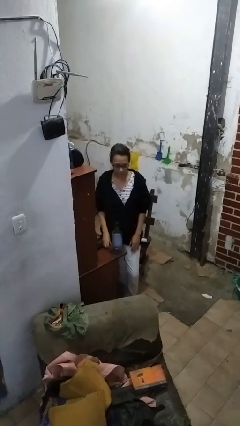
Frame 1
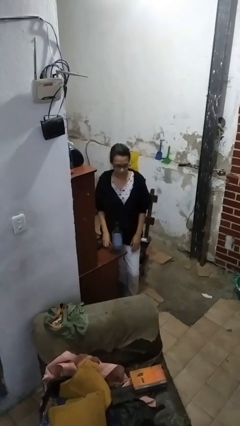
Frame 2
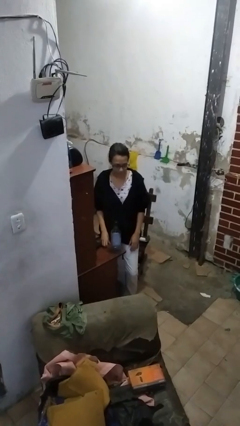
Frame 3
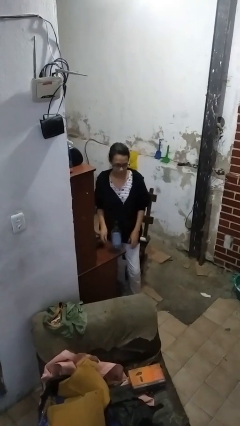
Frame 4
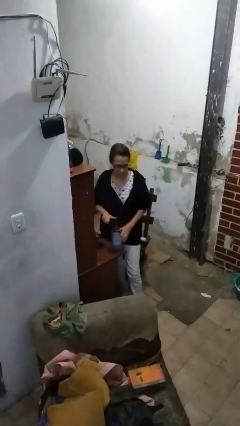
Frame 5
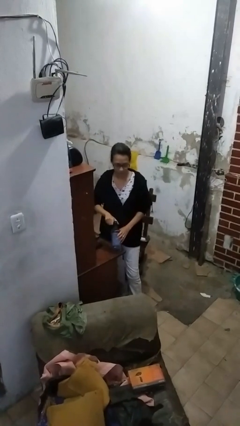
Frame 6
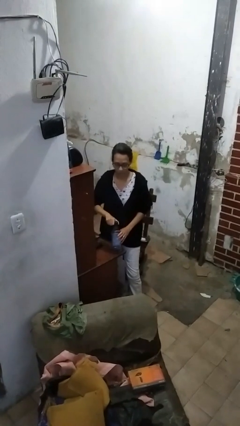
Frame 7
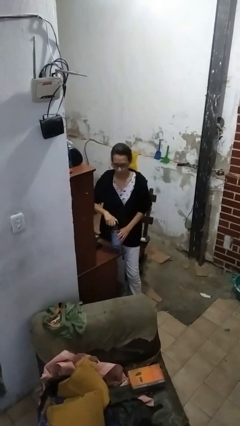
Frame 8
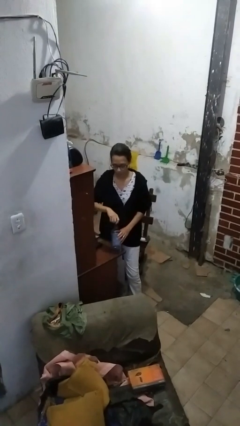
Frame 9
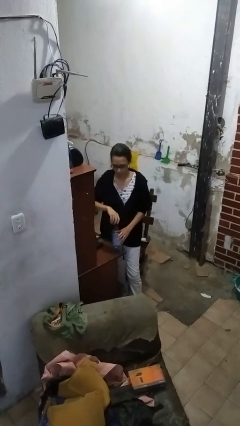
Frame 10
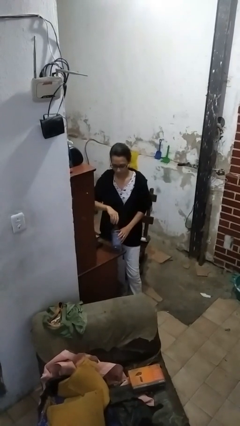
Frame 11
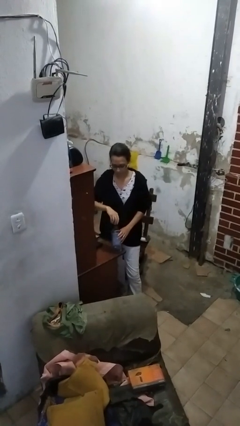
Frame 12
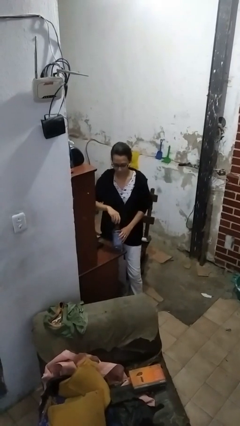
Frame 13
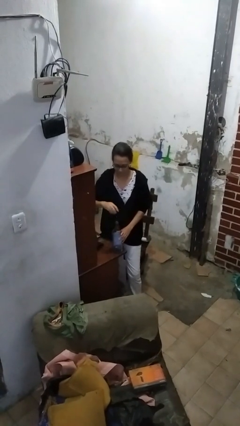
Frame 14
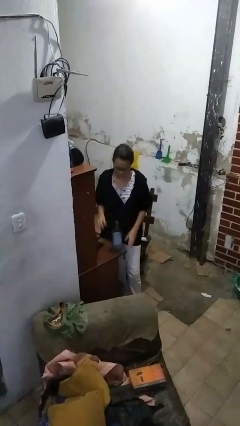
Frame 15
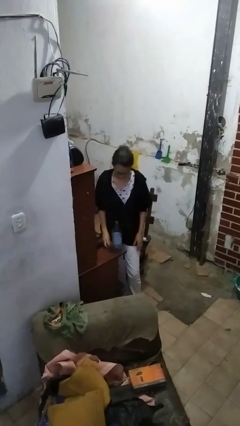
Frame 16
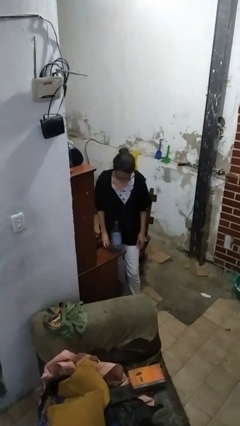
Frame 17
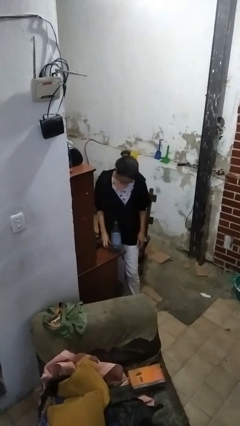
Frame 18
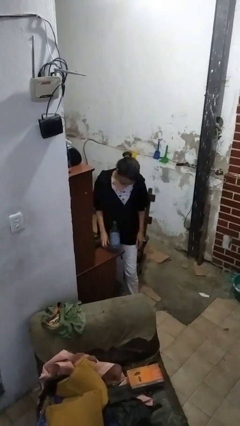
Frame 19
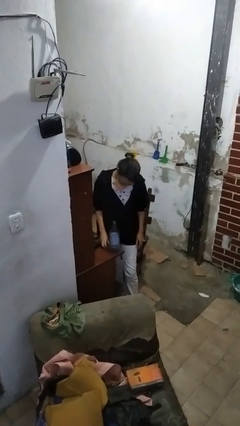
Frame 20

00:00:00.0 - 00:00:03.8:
person unscrews lid from bottle

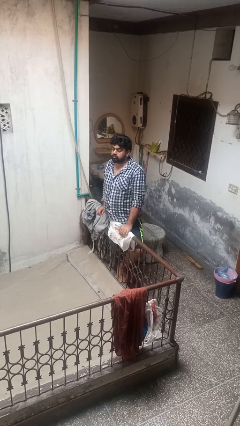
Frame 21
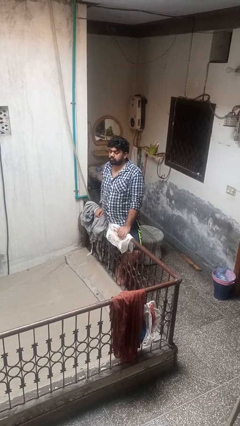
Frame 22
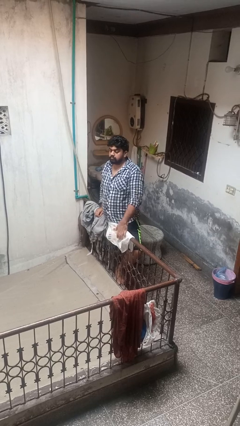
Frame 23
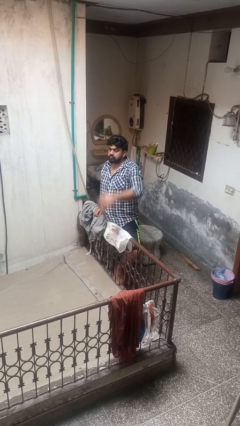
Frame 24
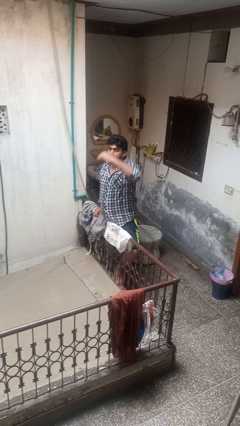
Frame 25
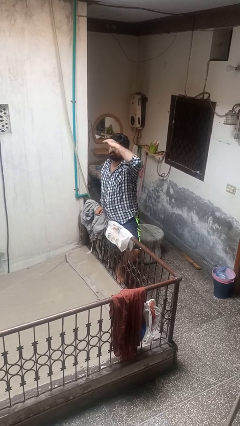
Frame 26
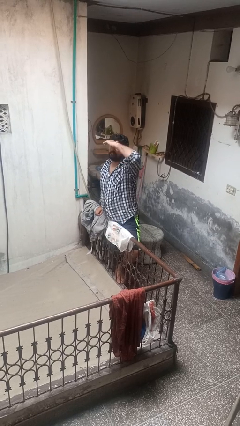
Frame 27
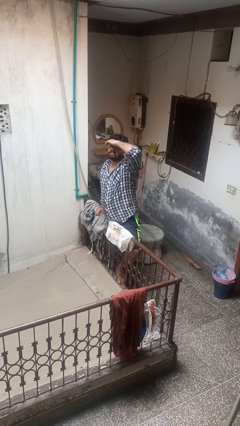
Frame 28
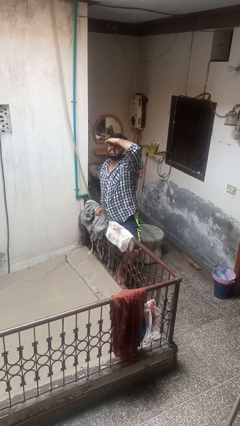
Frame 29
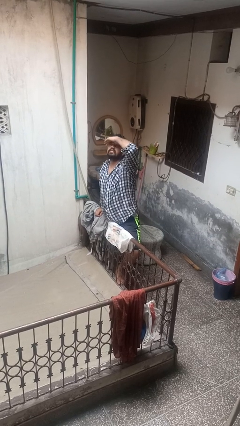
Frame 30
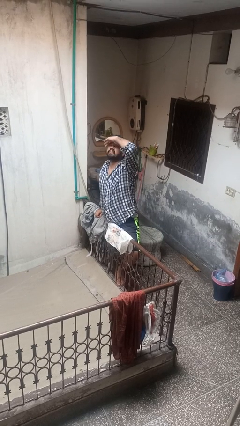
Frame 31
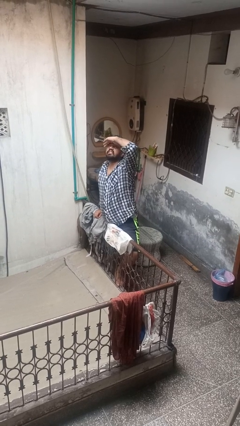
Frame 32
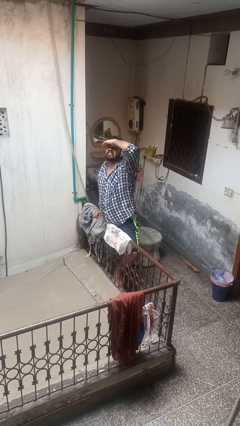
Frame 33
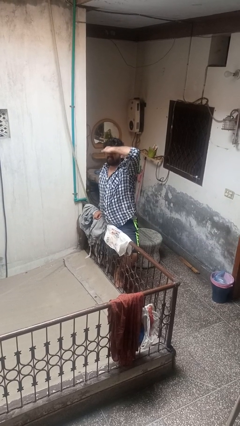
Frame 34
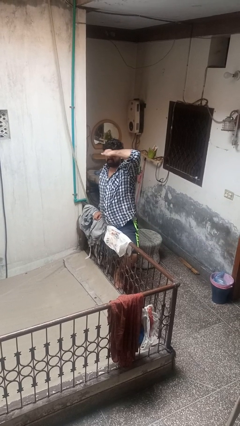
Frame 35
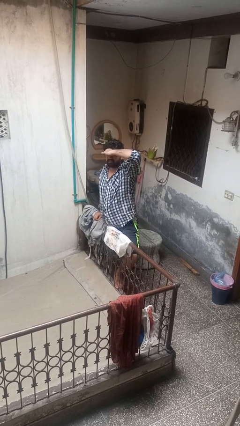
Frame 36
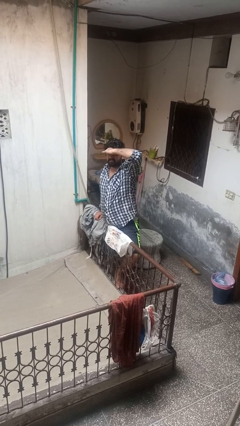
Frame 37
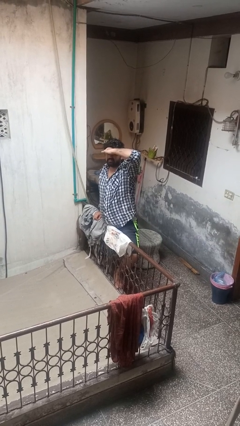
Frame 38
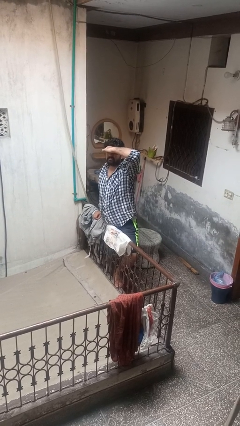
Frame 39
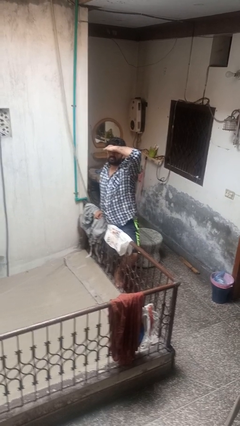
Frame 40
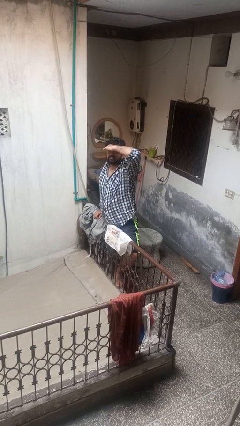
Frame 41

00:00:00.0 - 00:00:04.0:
person shades eyes

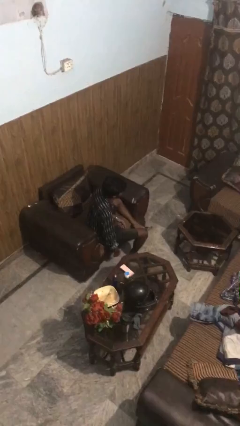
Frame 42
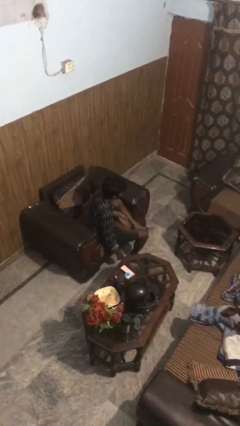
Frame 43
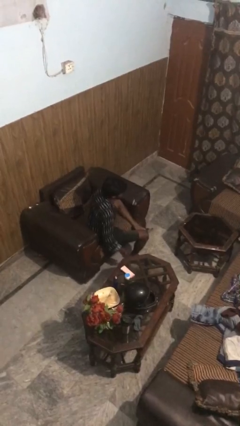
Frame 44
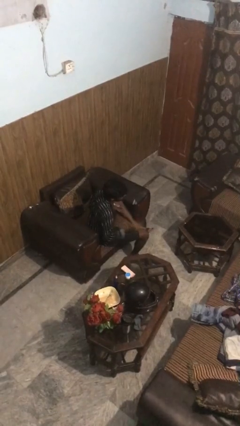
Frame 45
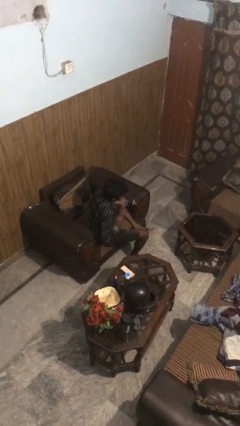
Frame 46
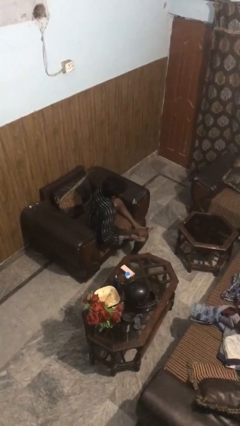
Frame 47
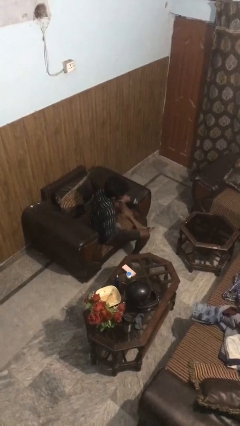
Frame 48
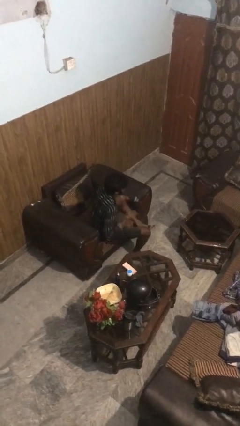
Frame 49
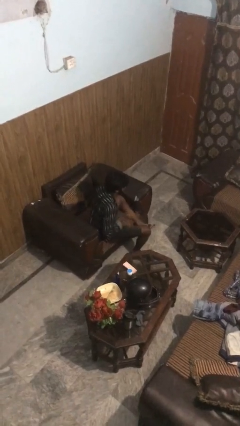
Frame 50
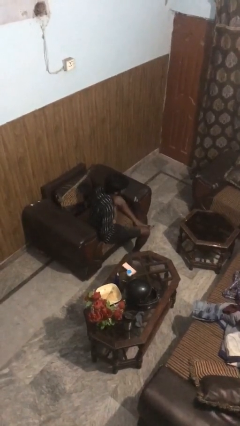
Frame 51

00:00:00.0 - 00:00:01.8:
person drums on chest

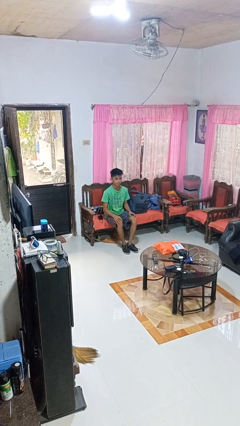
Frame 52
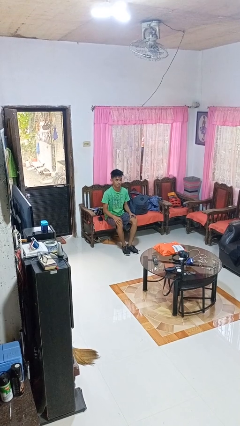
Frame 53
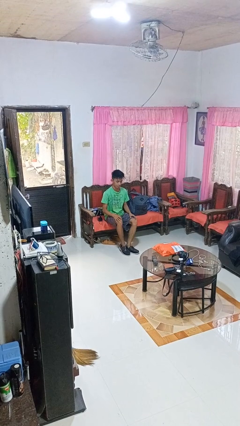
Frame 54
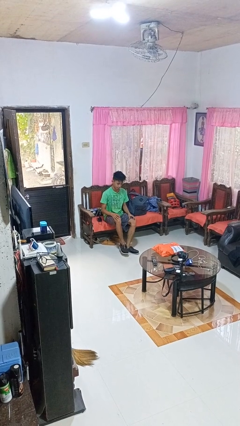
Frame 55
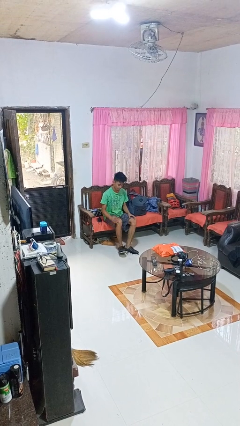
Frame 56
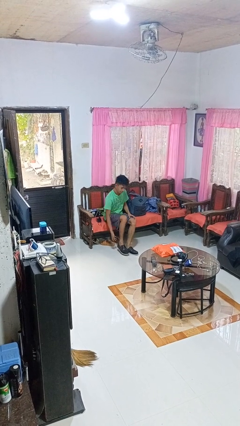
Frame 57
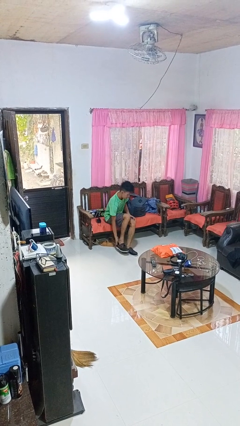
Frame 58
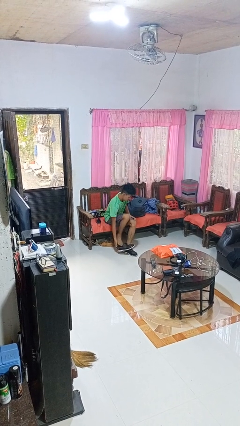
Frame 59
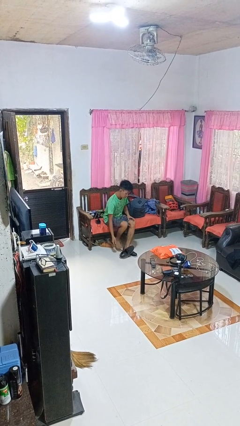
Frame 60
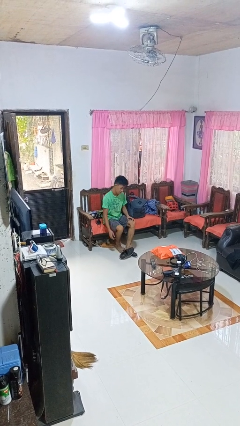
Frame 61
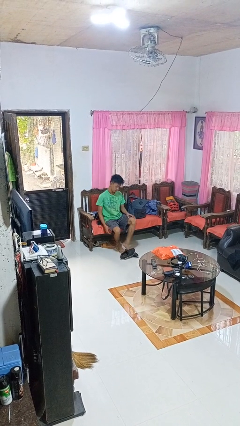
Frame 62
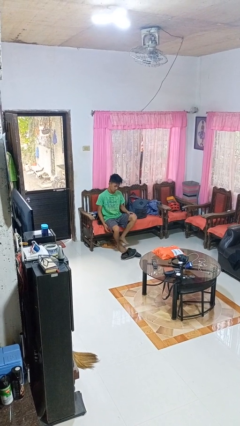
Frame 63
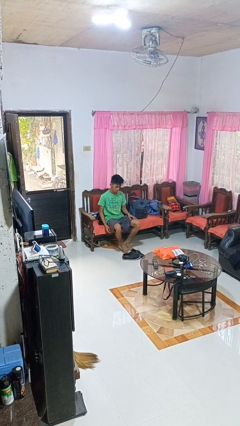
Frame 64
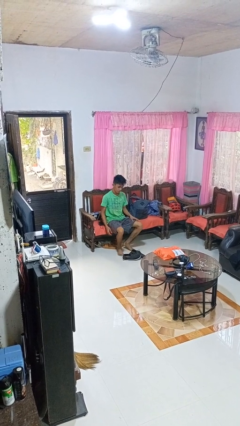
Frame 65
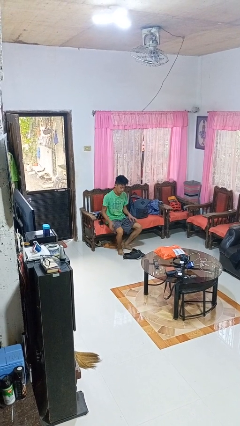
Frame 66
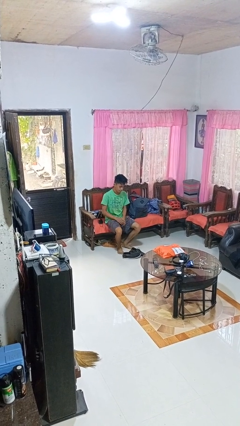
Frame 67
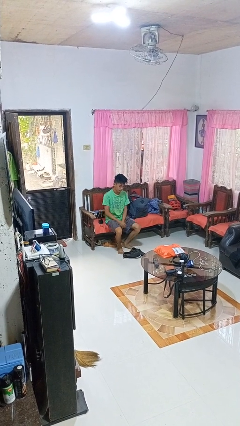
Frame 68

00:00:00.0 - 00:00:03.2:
person takes off shoes

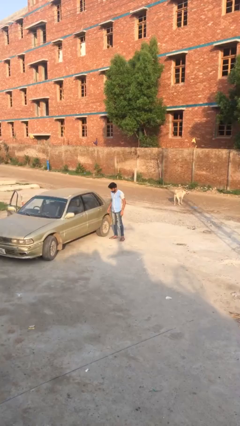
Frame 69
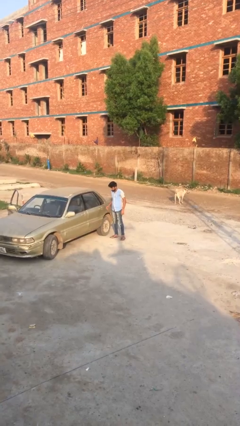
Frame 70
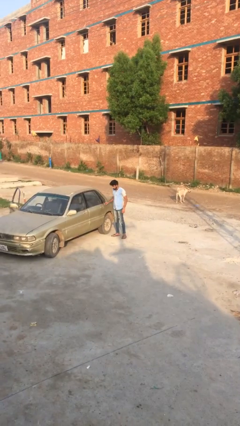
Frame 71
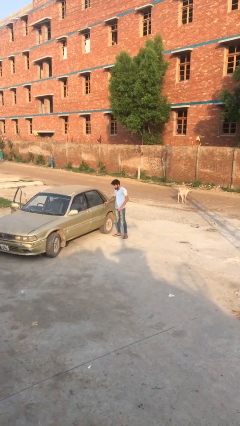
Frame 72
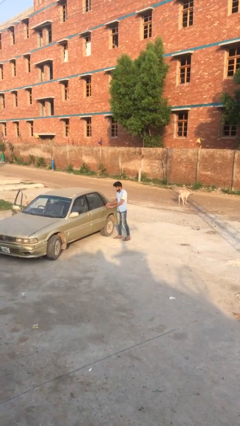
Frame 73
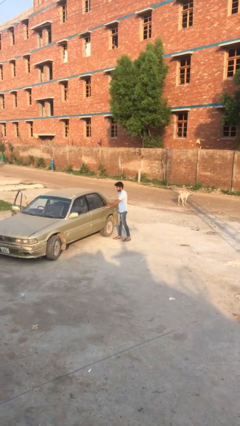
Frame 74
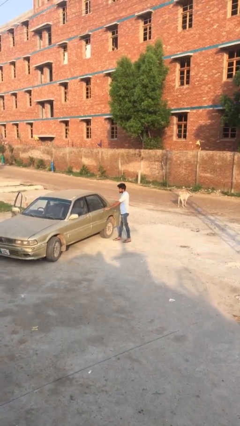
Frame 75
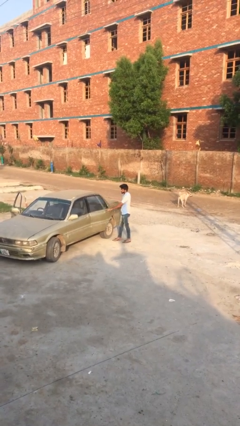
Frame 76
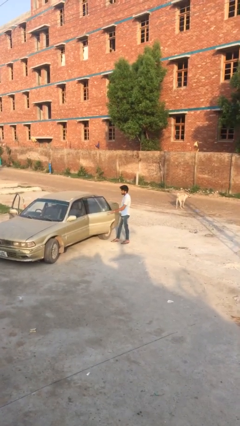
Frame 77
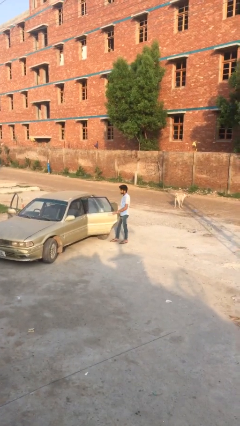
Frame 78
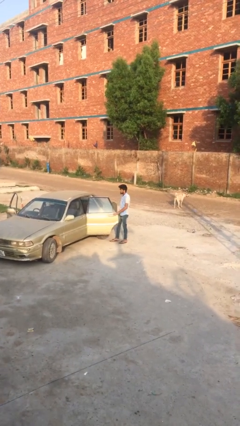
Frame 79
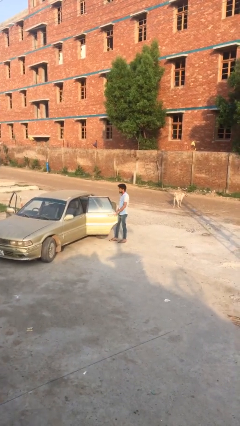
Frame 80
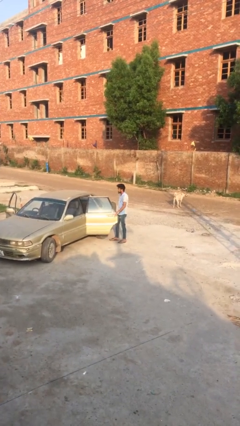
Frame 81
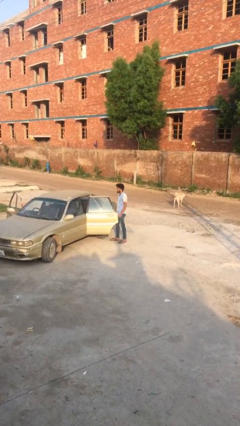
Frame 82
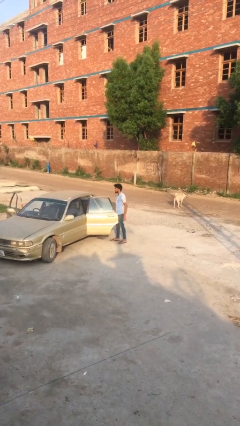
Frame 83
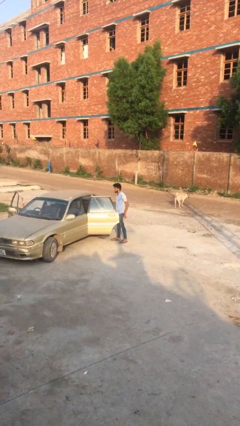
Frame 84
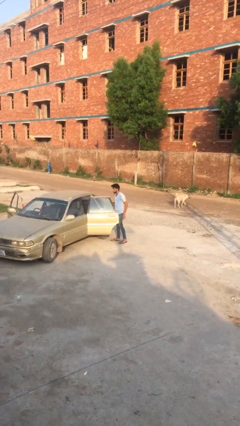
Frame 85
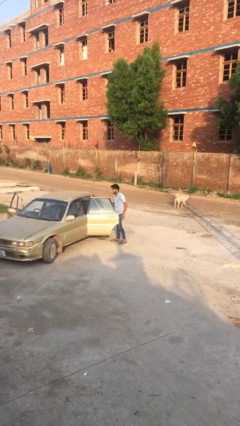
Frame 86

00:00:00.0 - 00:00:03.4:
person opens car door

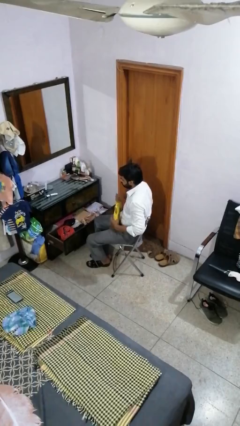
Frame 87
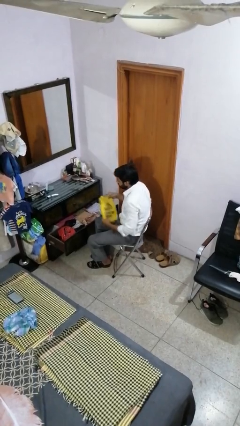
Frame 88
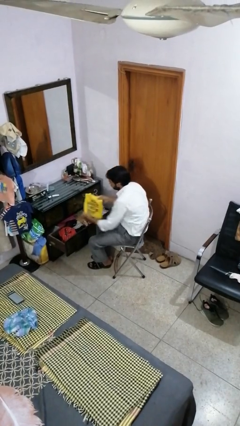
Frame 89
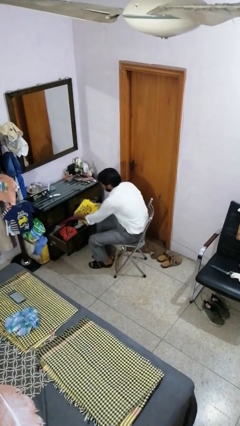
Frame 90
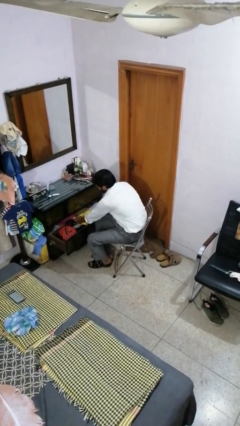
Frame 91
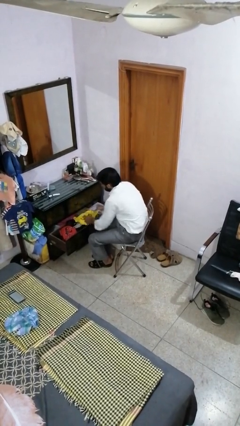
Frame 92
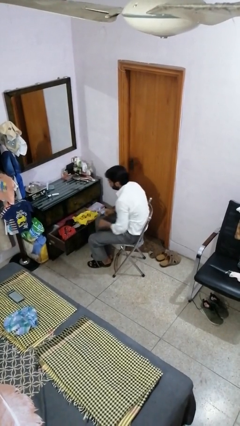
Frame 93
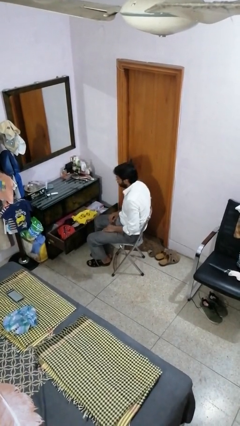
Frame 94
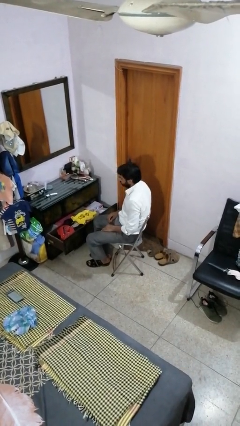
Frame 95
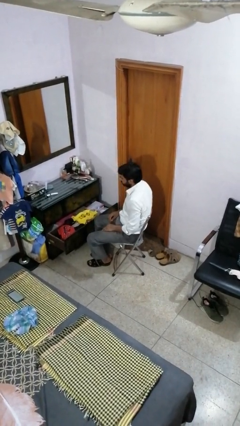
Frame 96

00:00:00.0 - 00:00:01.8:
person puts clothes into dresser
